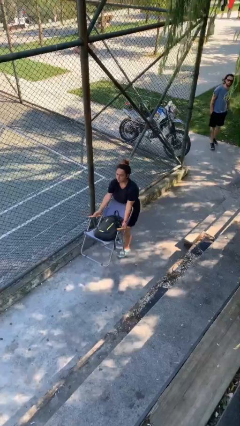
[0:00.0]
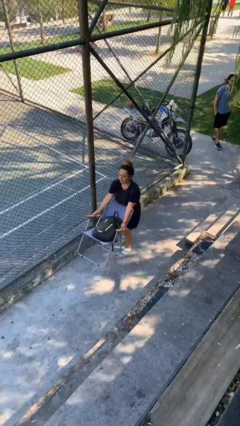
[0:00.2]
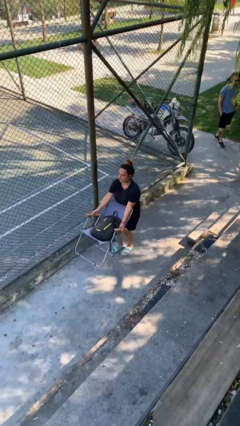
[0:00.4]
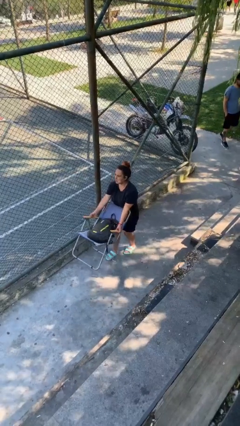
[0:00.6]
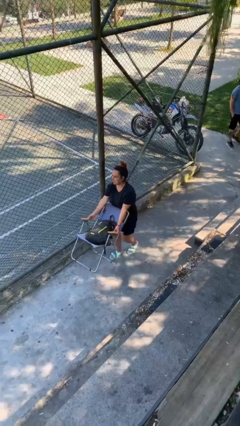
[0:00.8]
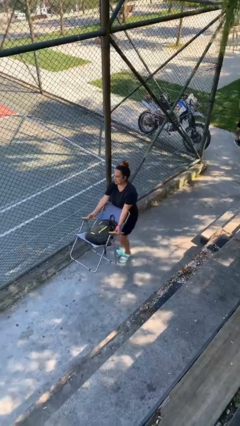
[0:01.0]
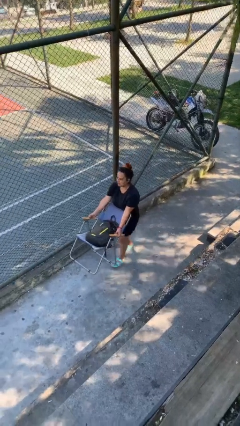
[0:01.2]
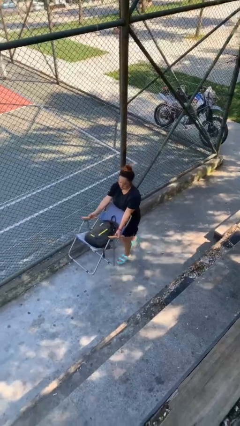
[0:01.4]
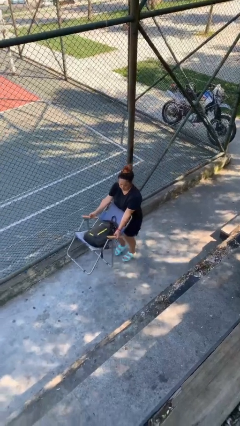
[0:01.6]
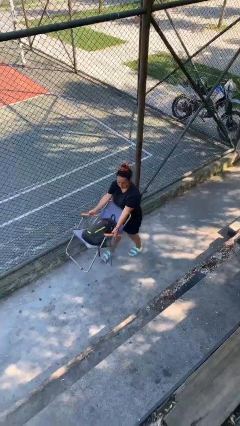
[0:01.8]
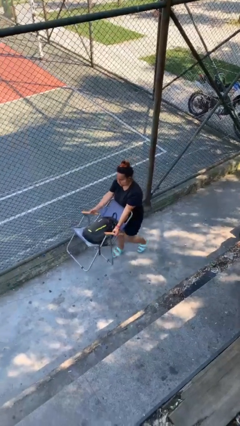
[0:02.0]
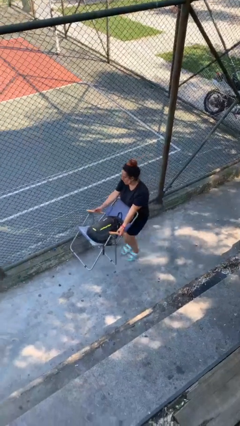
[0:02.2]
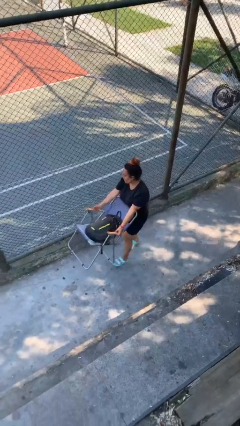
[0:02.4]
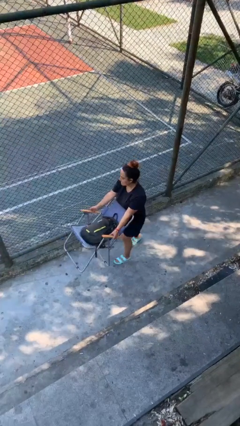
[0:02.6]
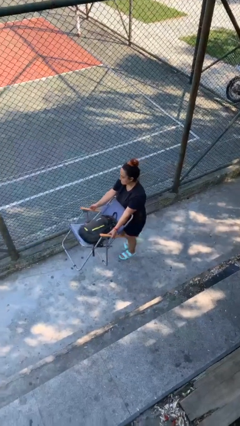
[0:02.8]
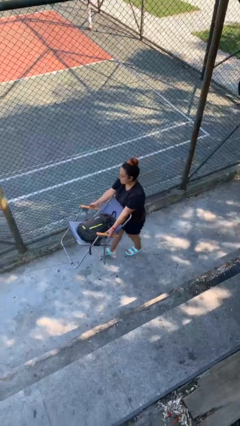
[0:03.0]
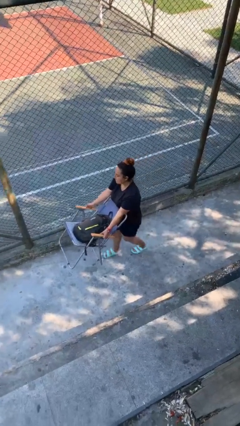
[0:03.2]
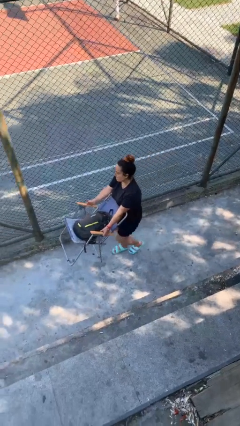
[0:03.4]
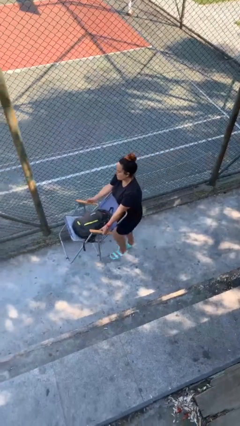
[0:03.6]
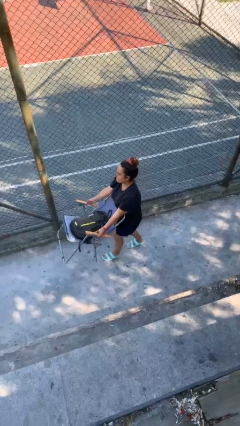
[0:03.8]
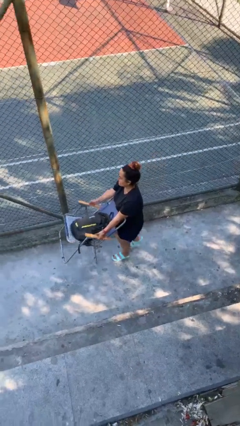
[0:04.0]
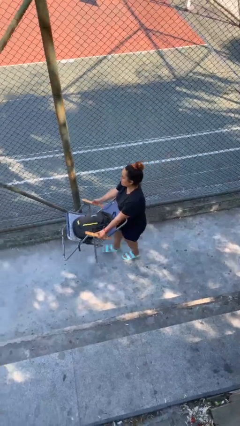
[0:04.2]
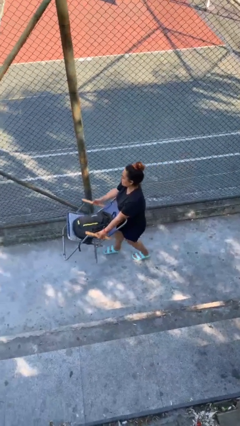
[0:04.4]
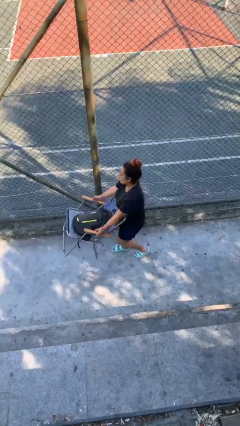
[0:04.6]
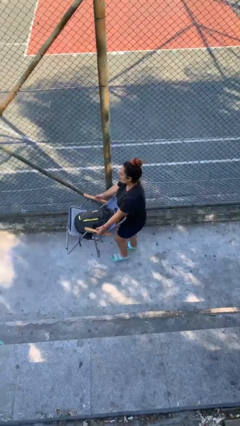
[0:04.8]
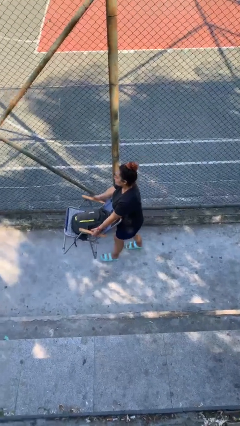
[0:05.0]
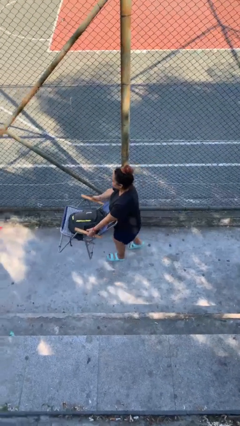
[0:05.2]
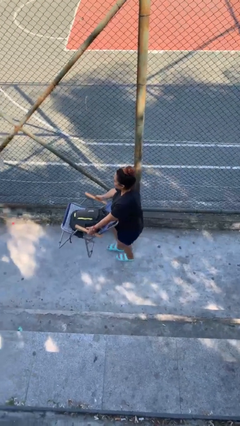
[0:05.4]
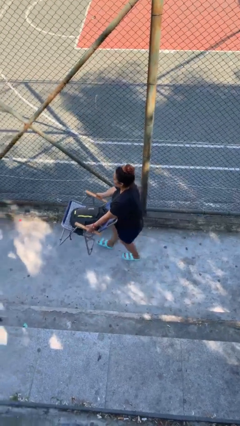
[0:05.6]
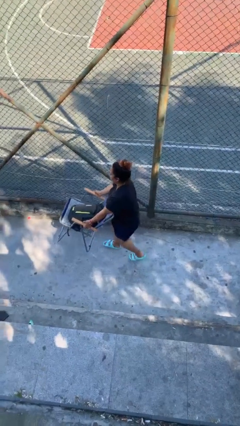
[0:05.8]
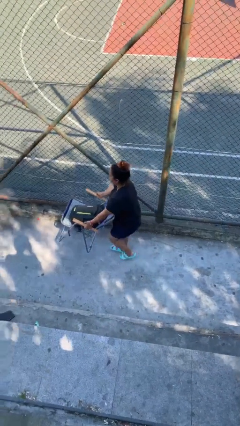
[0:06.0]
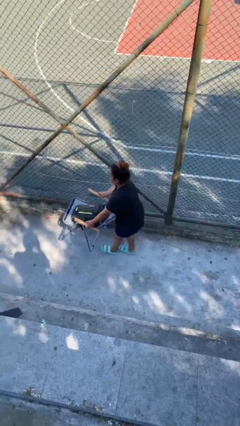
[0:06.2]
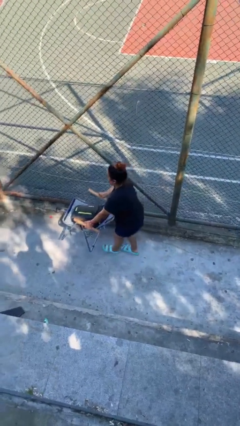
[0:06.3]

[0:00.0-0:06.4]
person carries heavy object

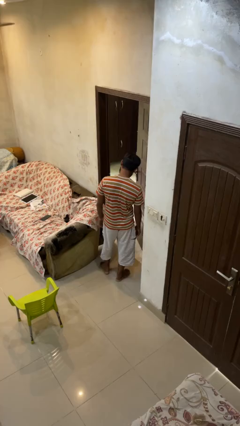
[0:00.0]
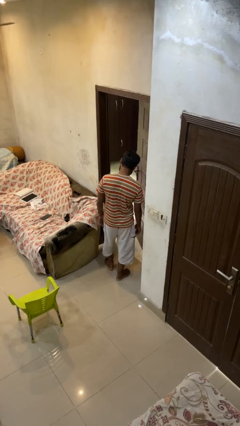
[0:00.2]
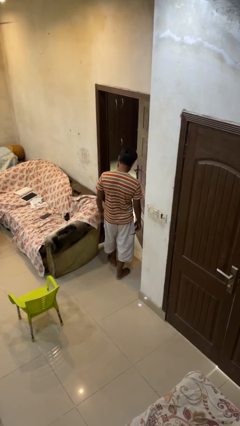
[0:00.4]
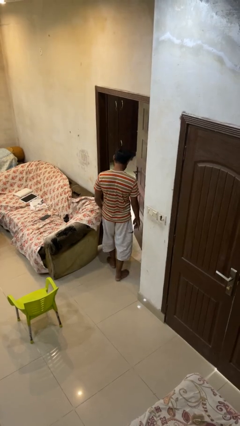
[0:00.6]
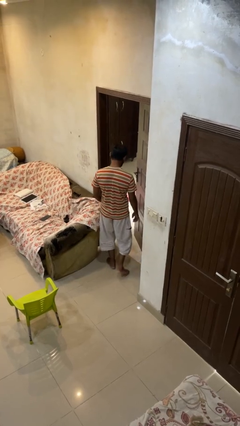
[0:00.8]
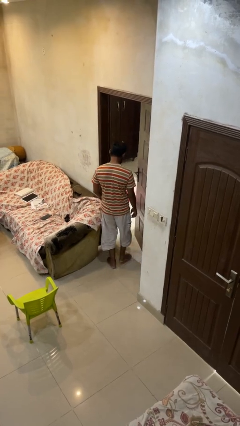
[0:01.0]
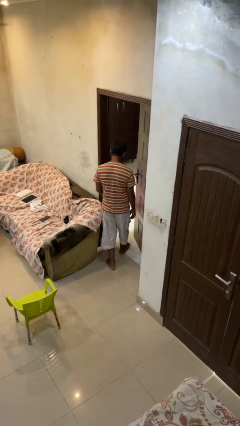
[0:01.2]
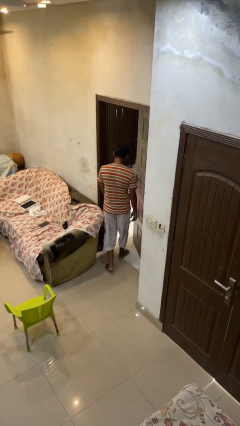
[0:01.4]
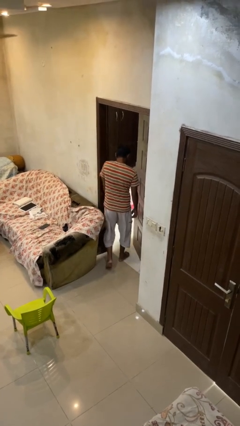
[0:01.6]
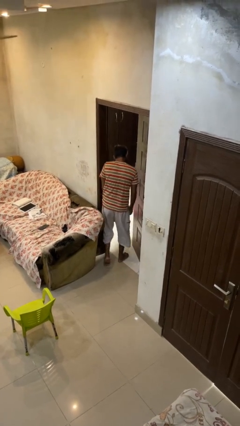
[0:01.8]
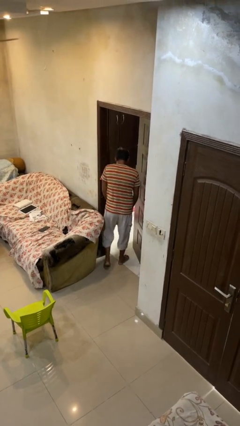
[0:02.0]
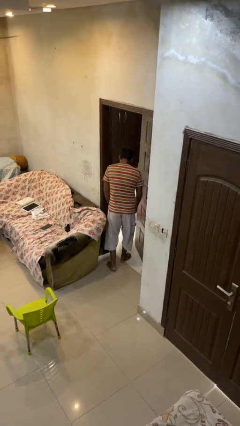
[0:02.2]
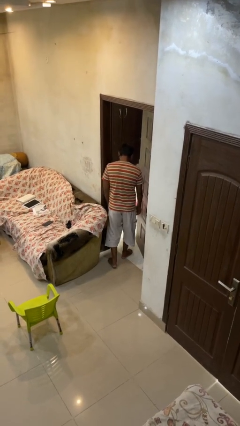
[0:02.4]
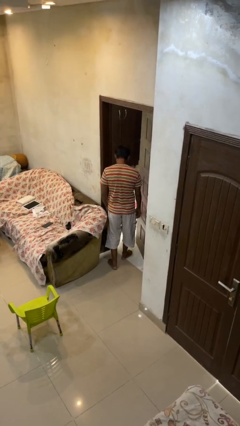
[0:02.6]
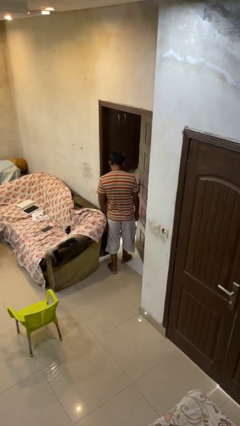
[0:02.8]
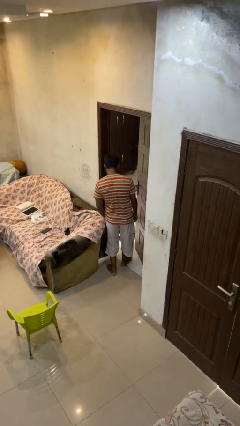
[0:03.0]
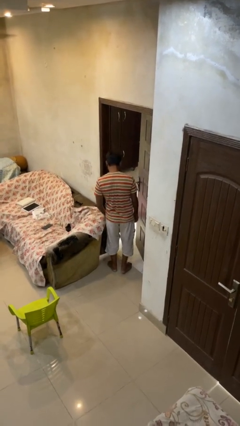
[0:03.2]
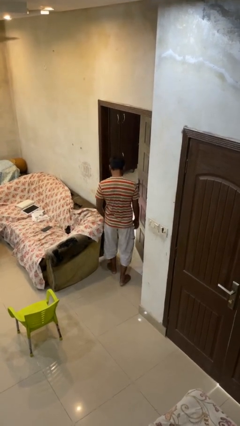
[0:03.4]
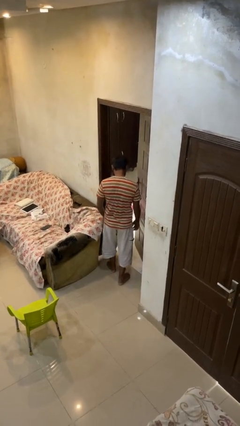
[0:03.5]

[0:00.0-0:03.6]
person bumps into wall

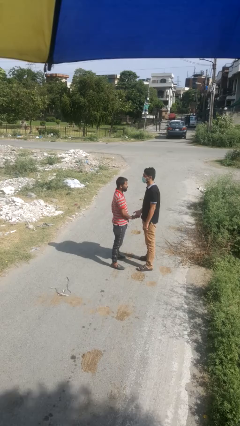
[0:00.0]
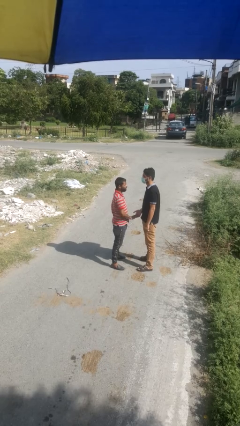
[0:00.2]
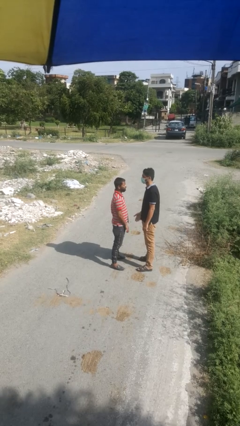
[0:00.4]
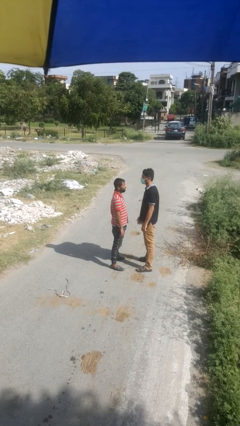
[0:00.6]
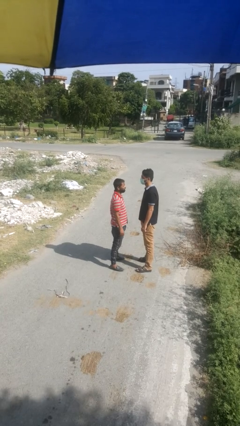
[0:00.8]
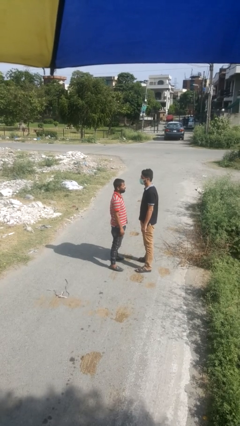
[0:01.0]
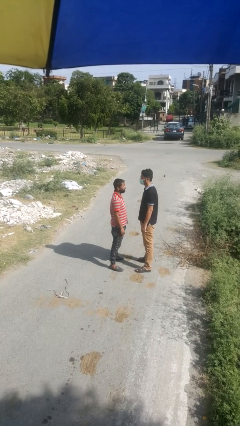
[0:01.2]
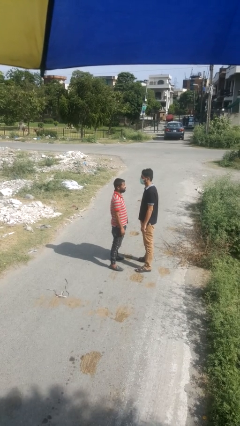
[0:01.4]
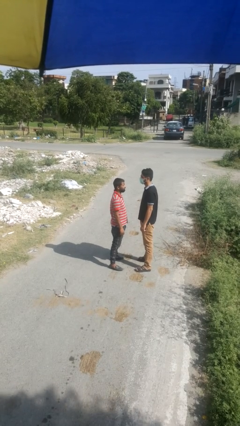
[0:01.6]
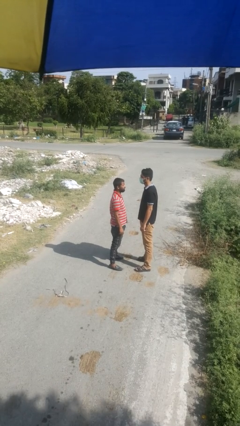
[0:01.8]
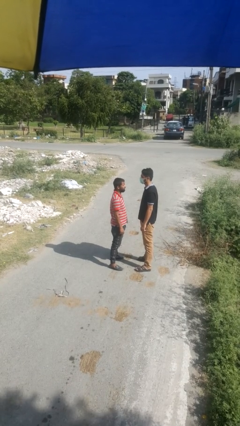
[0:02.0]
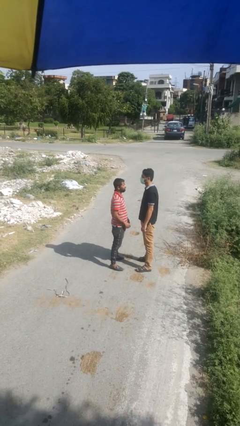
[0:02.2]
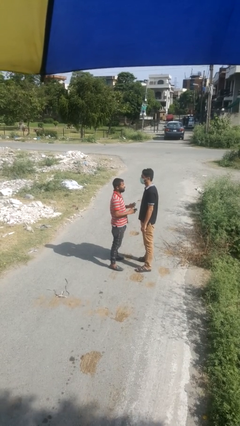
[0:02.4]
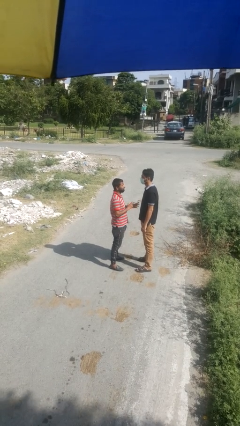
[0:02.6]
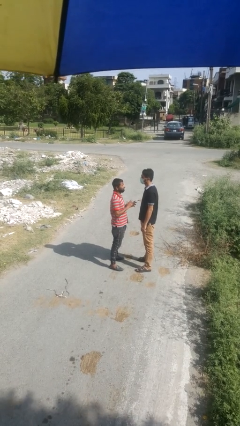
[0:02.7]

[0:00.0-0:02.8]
person highfives hand

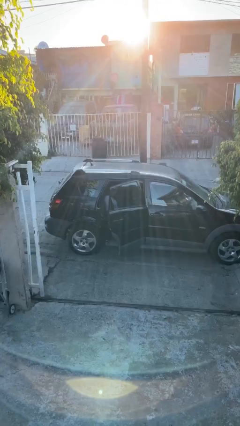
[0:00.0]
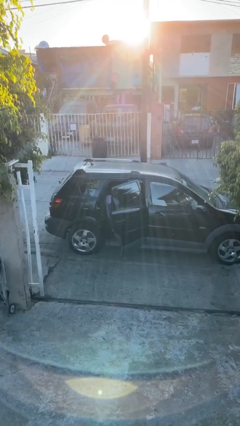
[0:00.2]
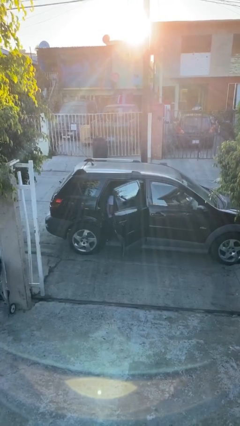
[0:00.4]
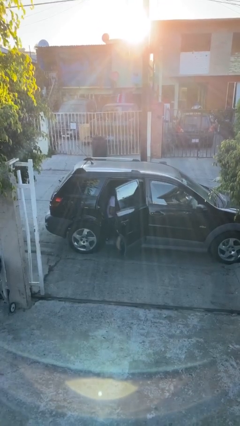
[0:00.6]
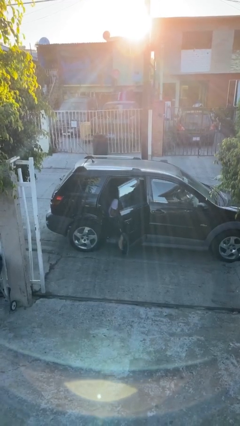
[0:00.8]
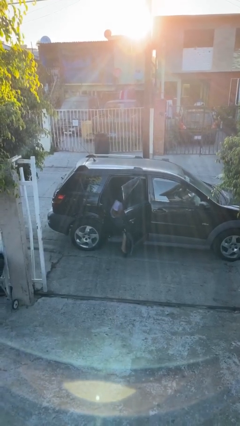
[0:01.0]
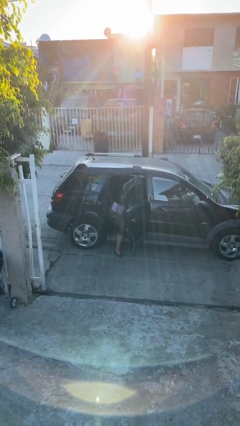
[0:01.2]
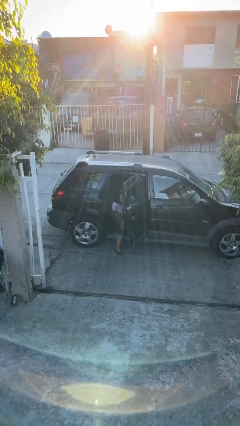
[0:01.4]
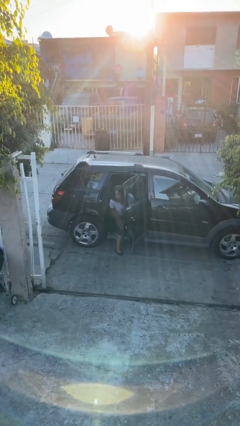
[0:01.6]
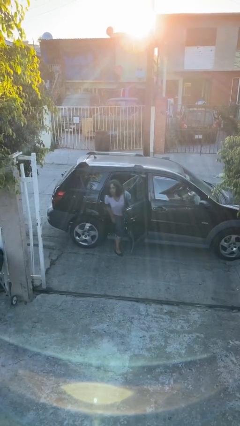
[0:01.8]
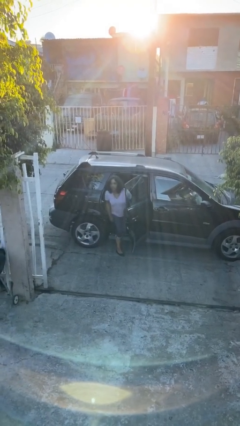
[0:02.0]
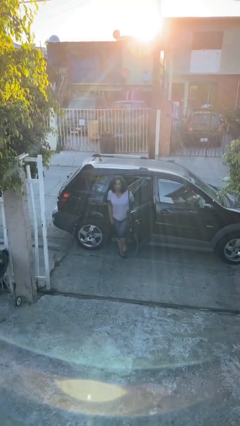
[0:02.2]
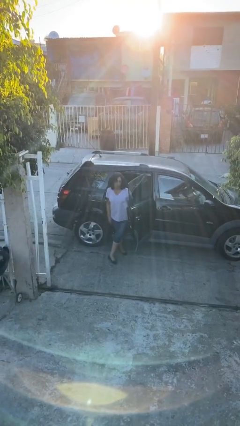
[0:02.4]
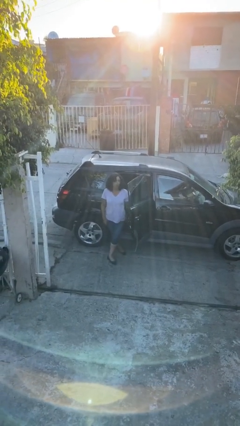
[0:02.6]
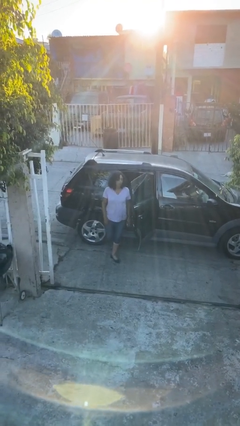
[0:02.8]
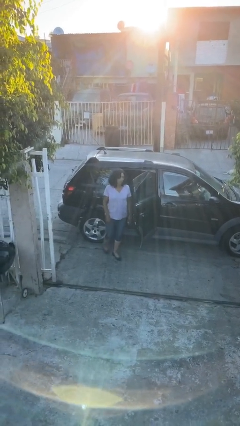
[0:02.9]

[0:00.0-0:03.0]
person exits car

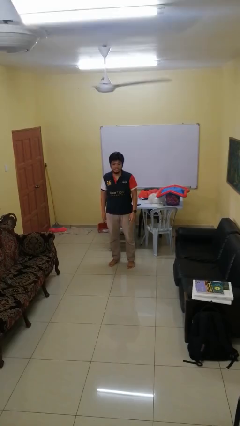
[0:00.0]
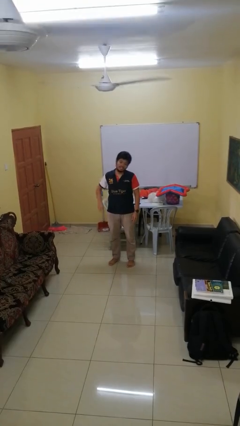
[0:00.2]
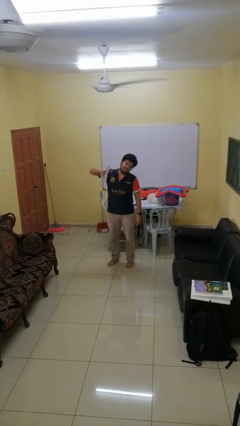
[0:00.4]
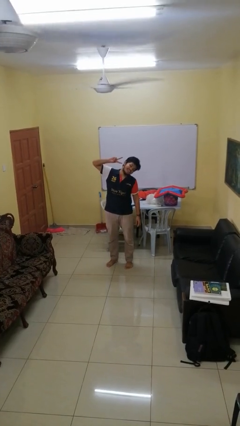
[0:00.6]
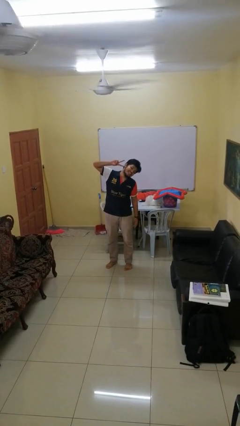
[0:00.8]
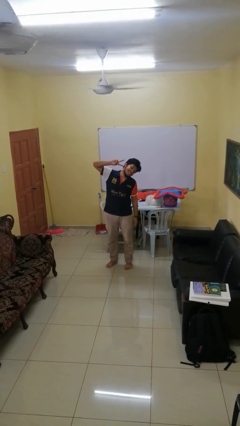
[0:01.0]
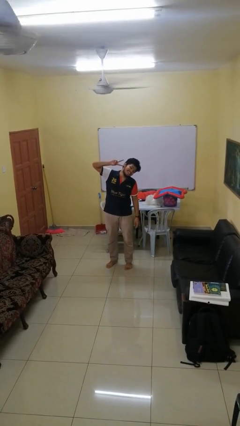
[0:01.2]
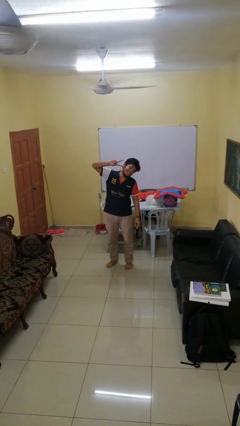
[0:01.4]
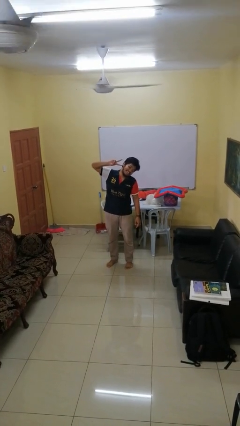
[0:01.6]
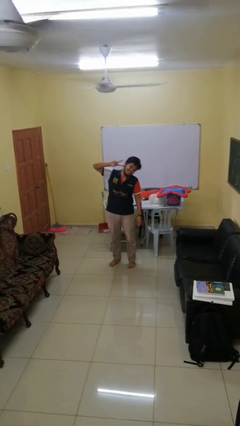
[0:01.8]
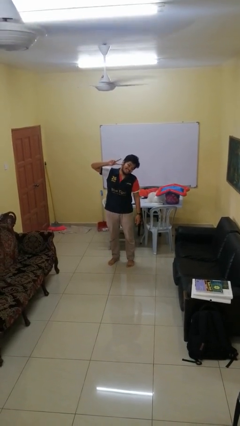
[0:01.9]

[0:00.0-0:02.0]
person gestures peace
